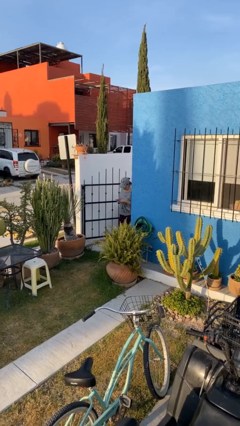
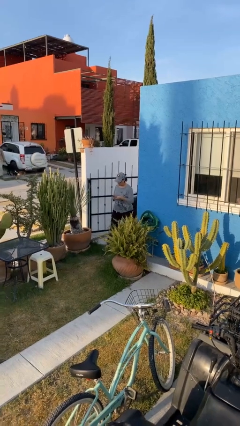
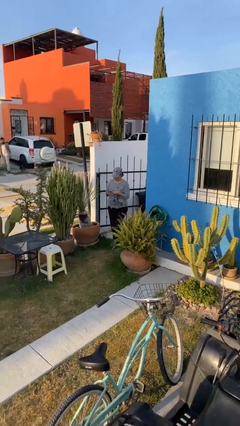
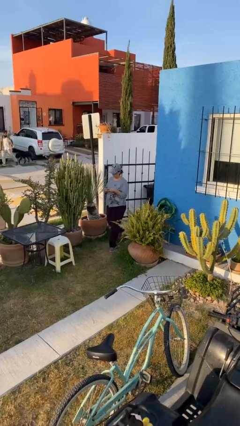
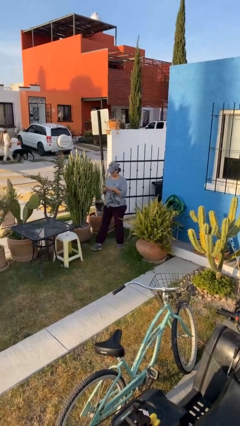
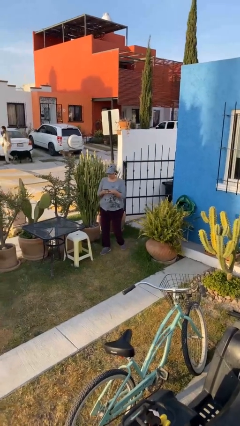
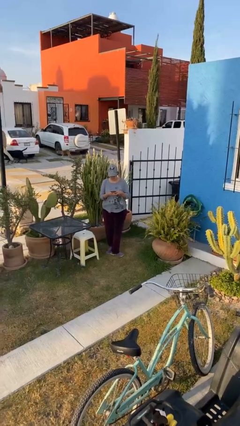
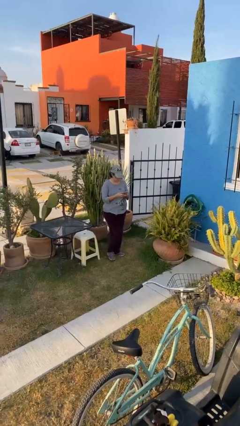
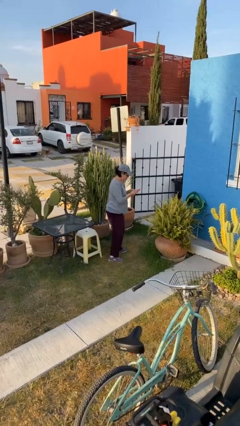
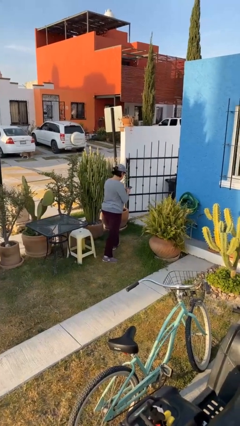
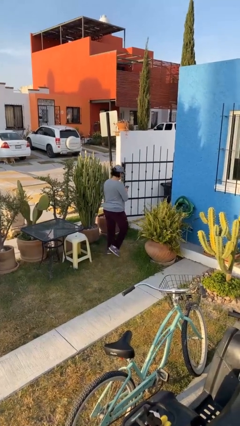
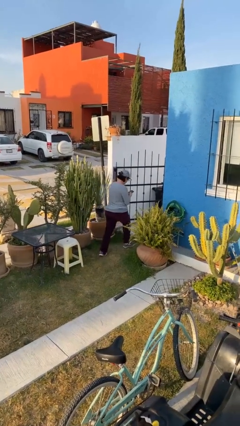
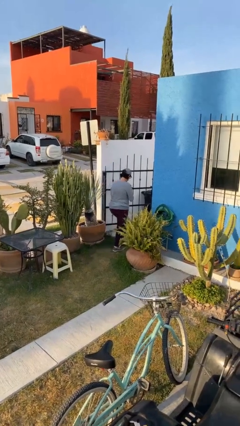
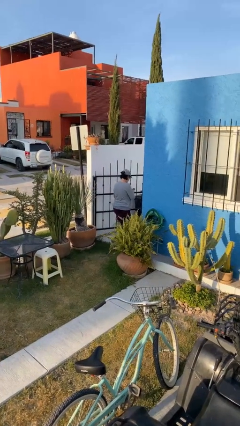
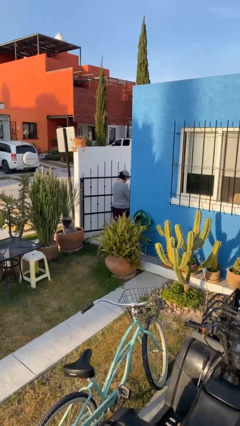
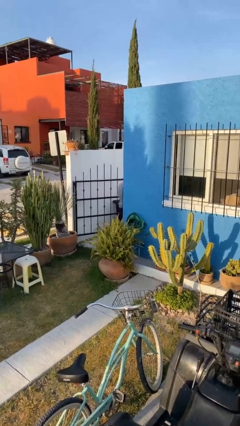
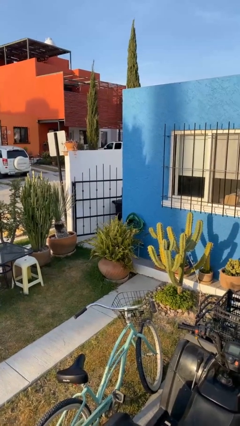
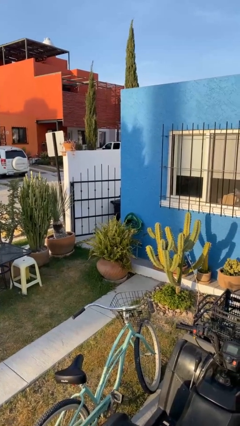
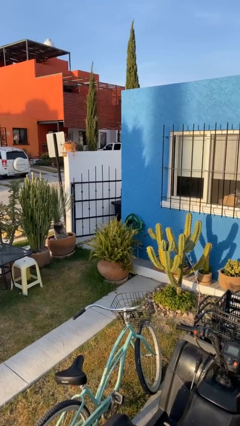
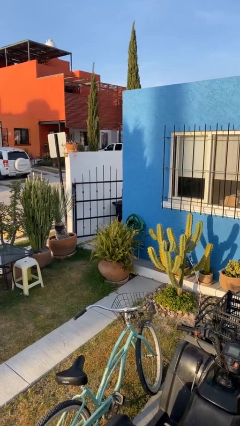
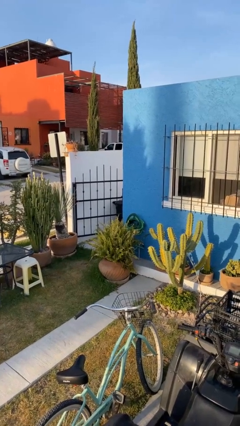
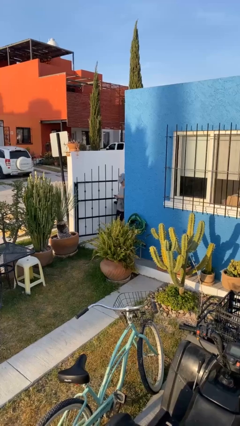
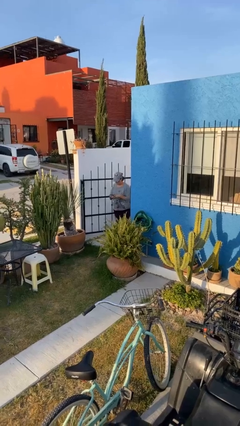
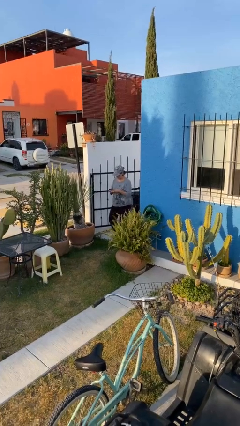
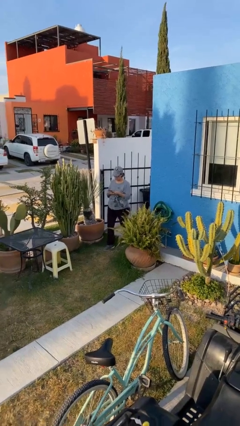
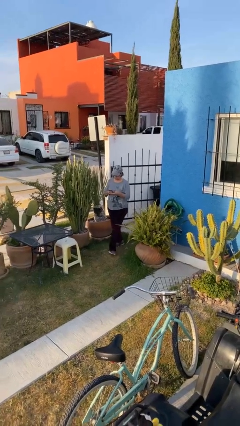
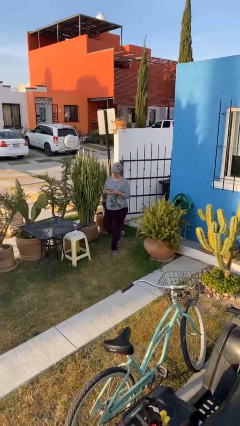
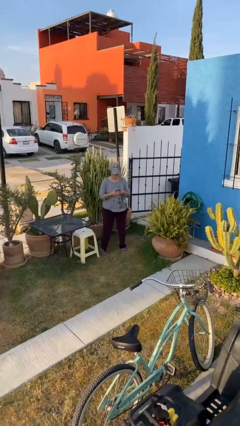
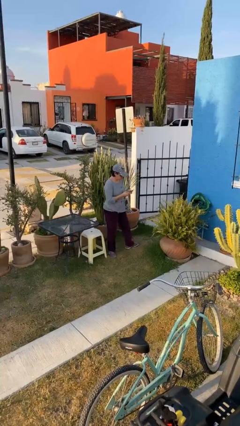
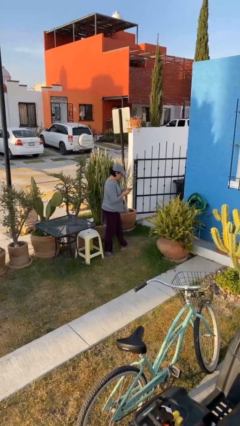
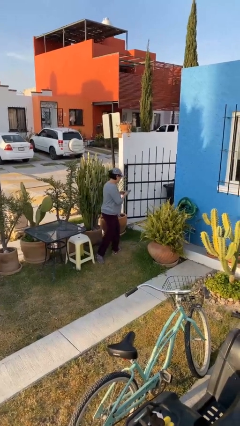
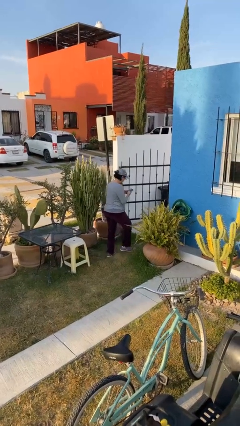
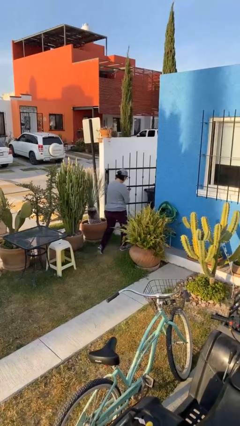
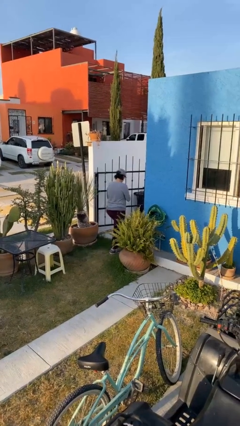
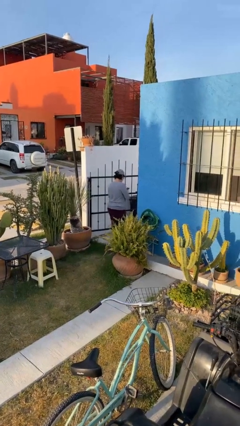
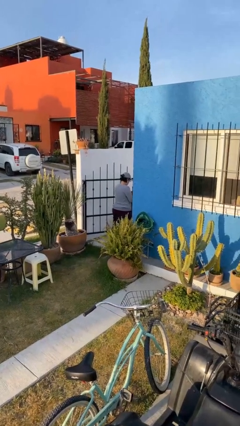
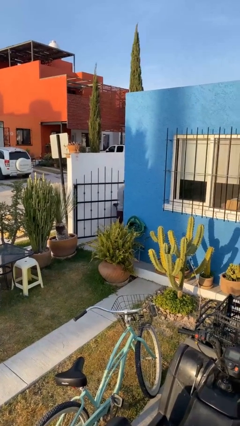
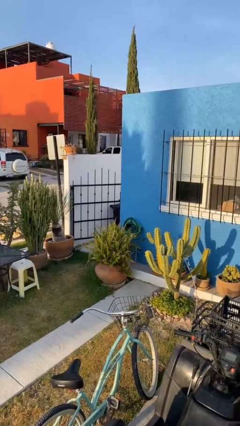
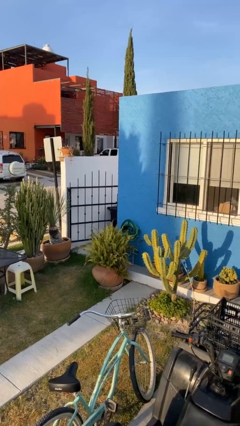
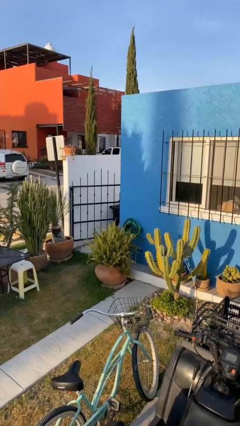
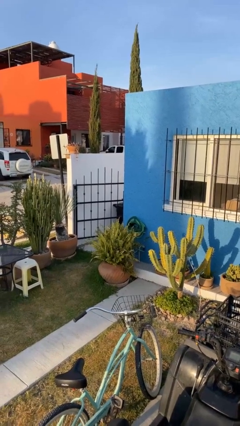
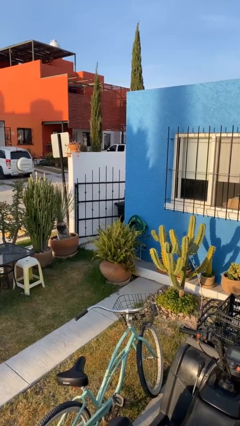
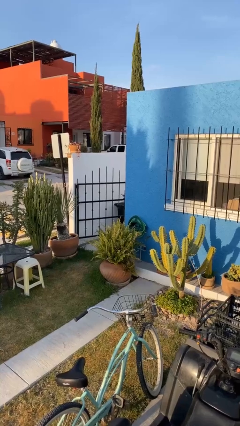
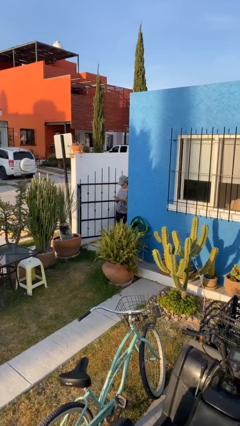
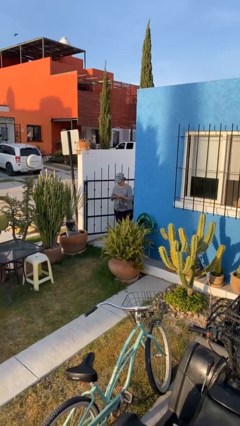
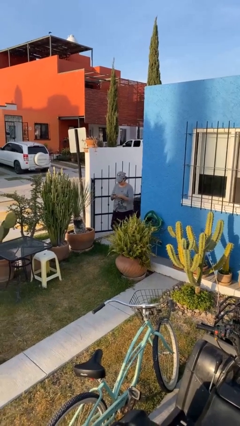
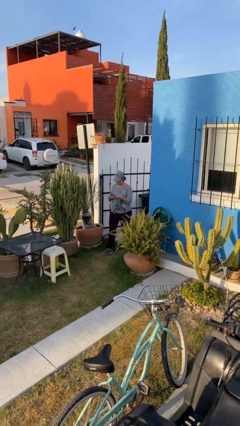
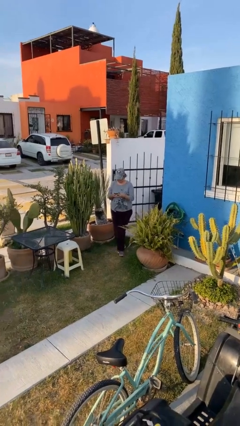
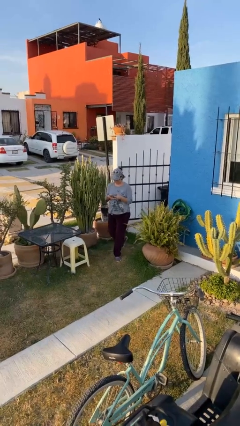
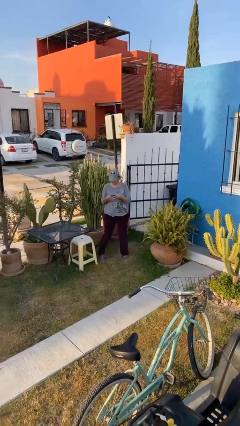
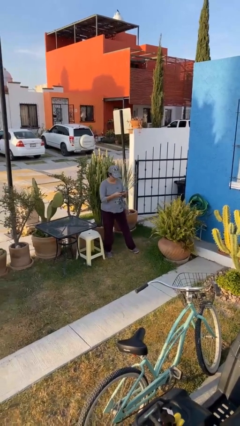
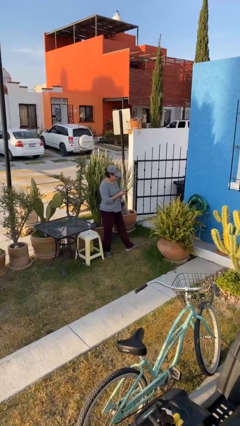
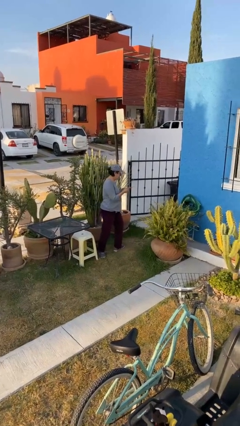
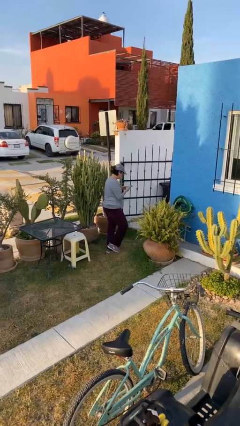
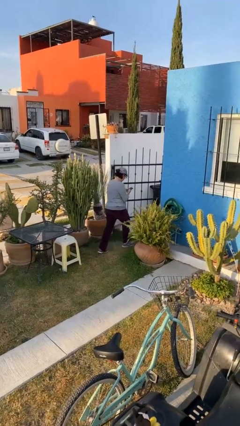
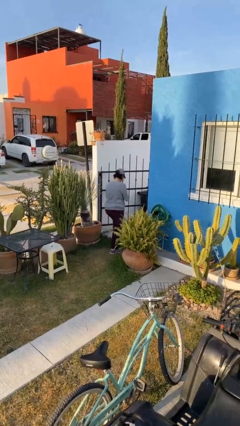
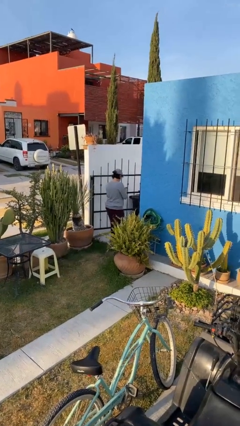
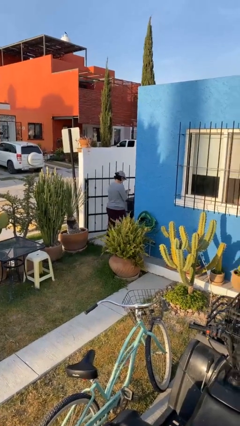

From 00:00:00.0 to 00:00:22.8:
person texts on phone

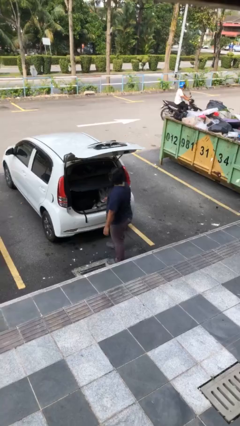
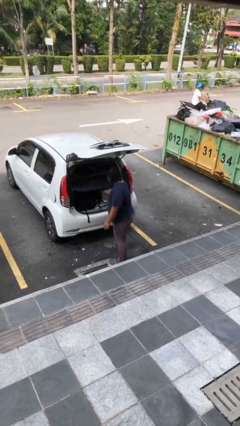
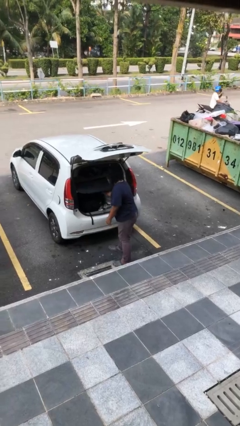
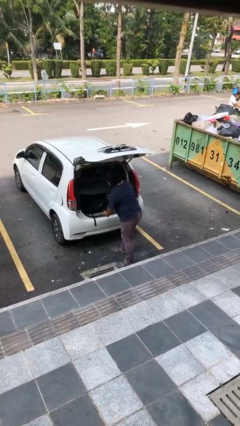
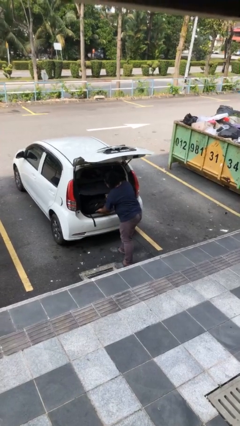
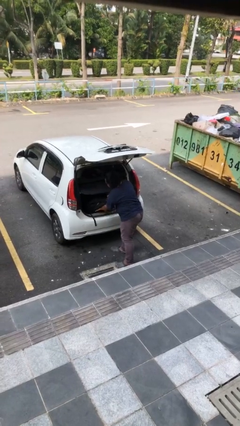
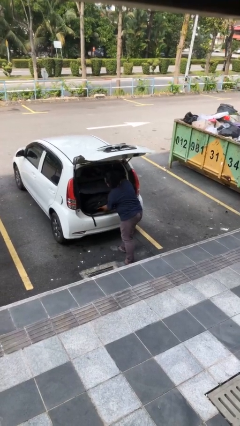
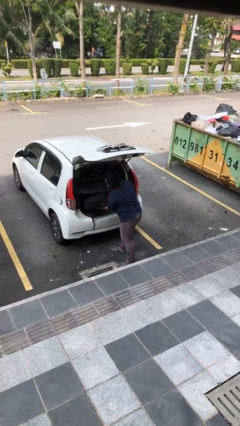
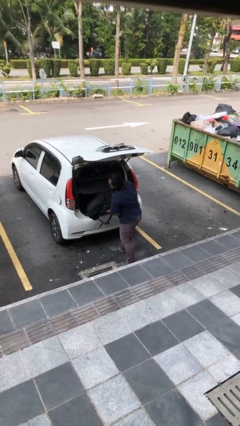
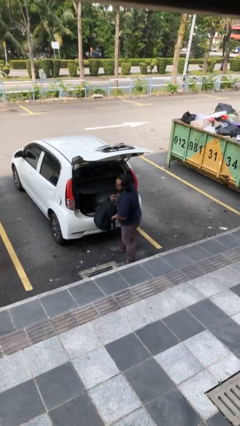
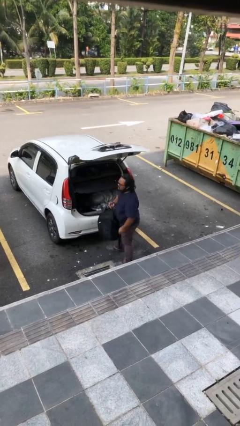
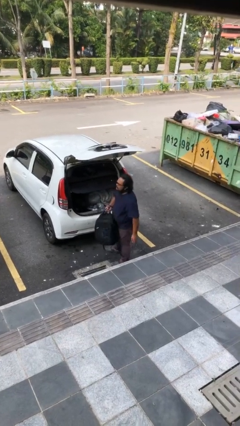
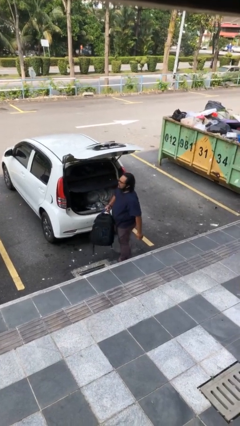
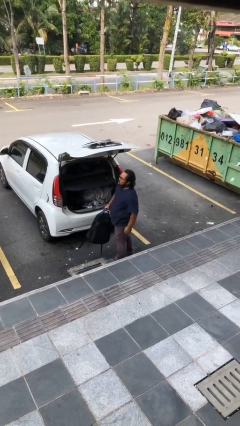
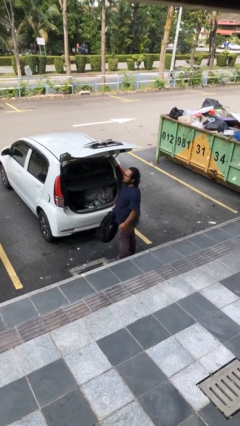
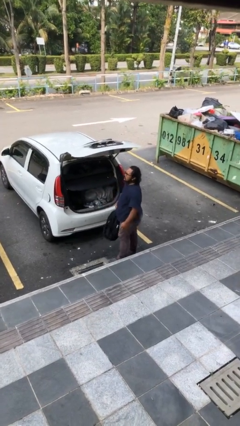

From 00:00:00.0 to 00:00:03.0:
person unloads car

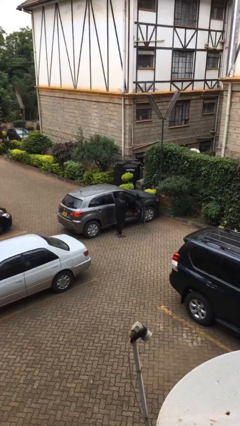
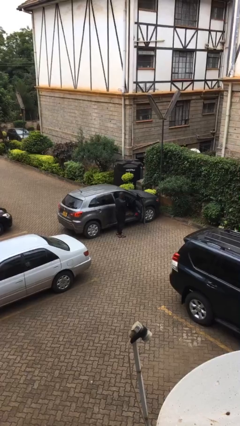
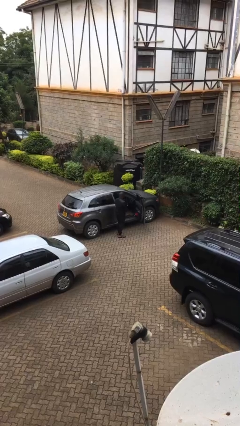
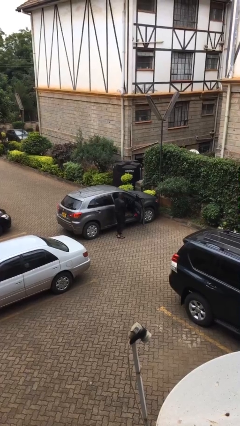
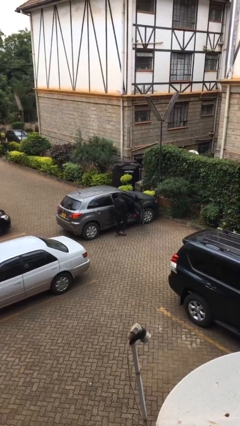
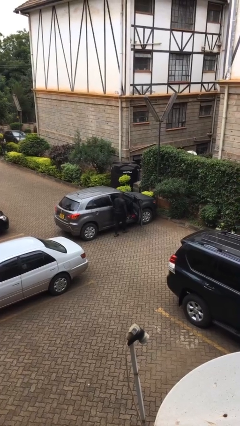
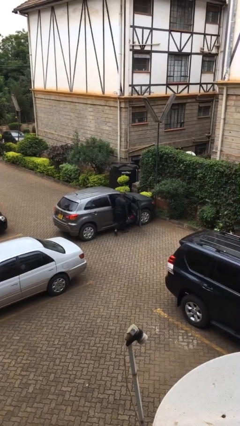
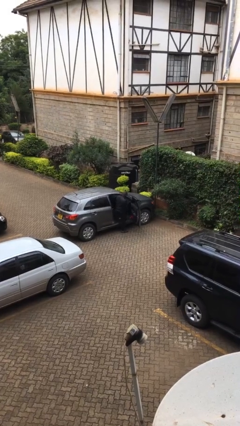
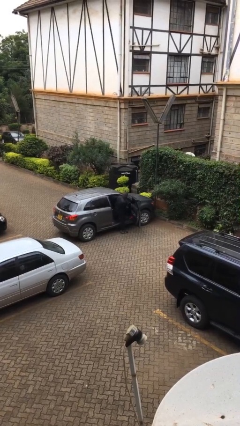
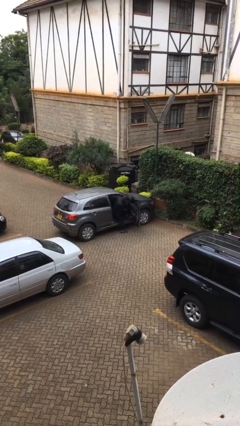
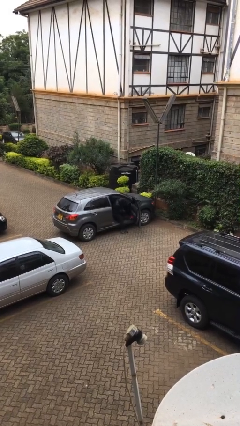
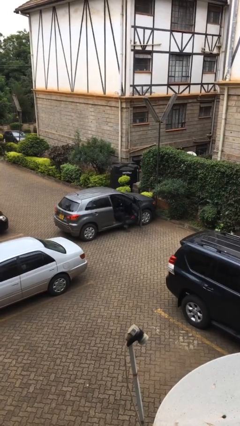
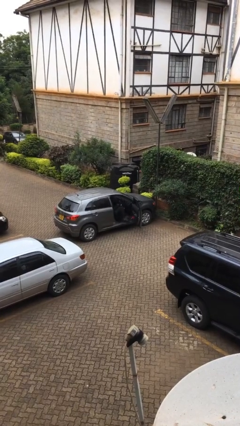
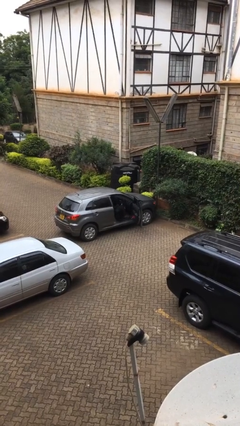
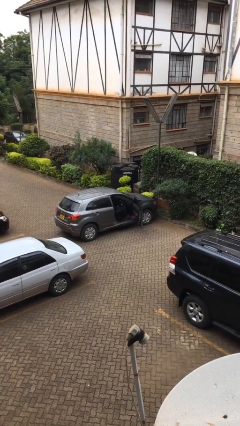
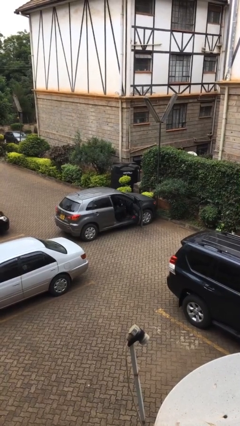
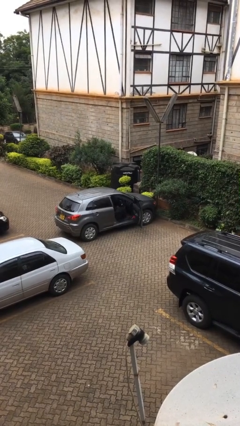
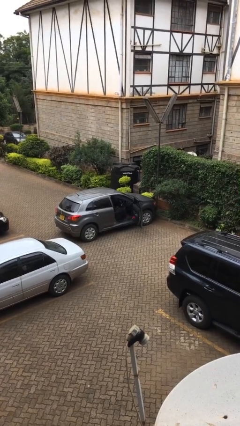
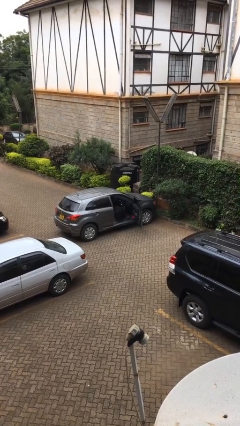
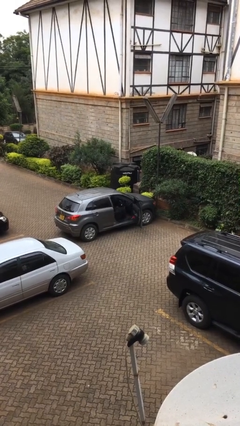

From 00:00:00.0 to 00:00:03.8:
person enters car

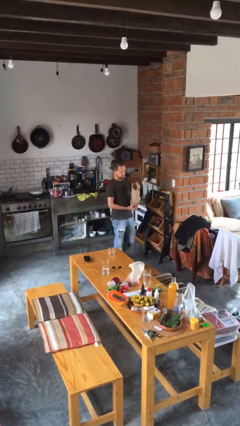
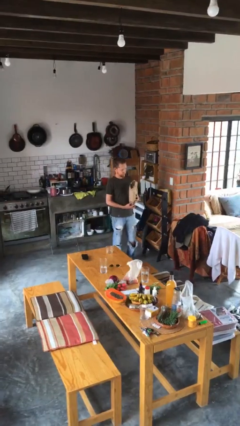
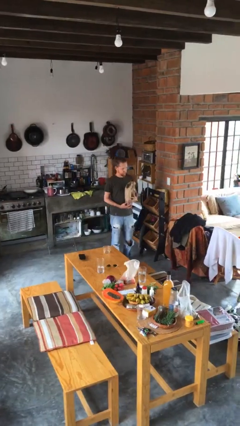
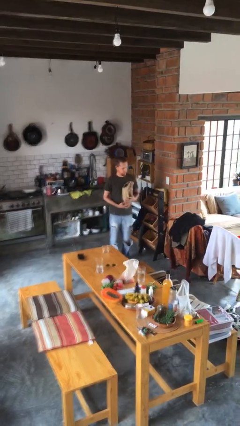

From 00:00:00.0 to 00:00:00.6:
person carries groceries
